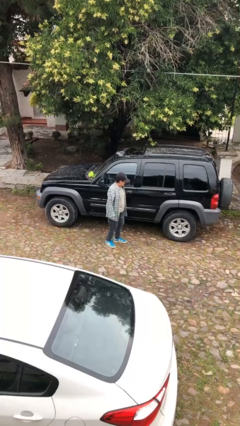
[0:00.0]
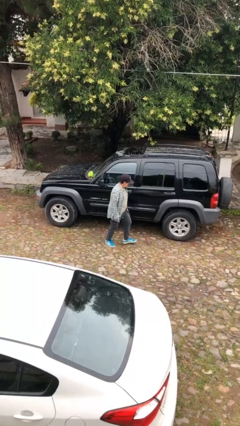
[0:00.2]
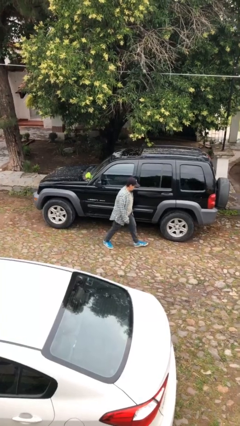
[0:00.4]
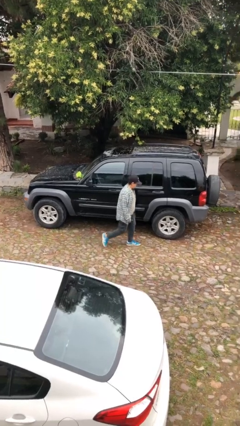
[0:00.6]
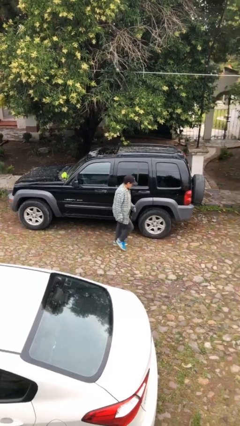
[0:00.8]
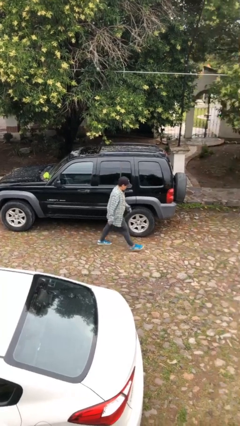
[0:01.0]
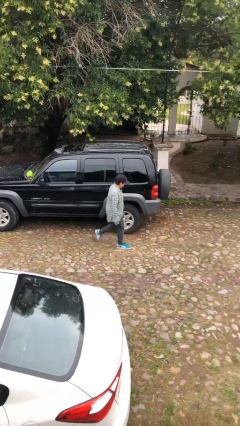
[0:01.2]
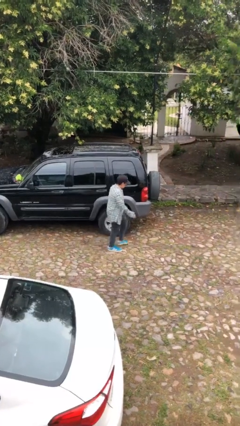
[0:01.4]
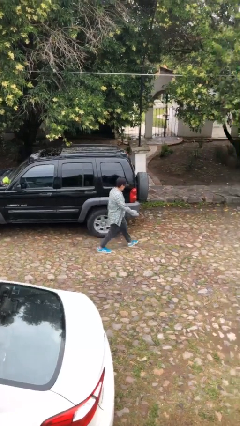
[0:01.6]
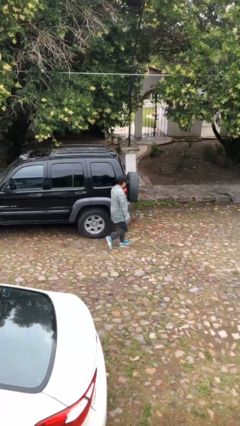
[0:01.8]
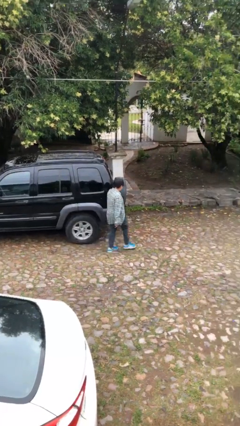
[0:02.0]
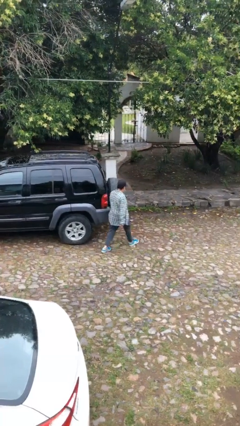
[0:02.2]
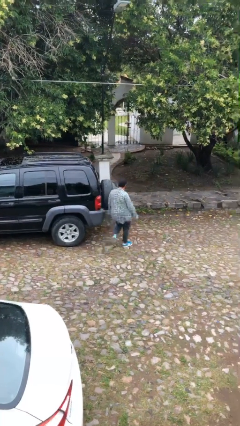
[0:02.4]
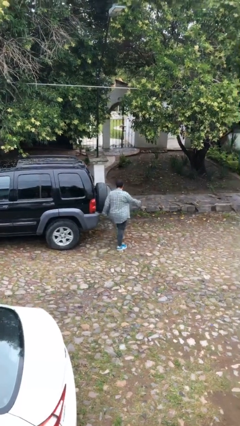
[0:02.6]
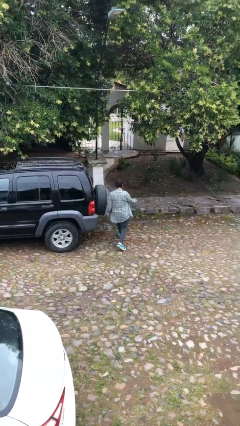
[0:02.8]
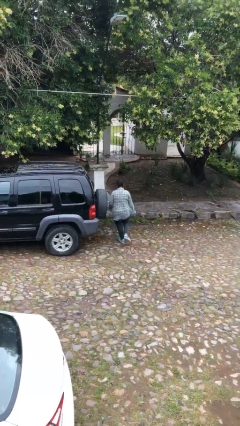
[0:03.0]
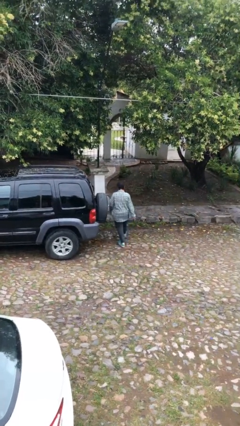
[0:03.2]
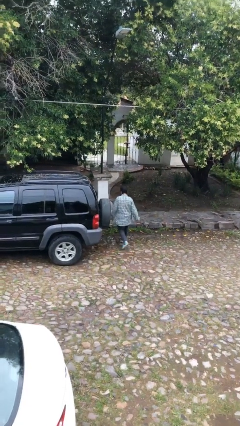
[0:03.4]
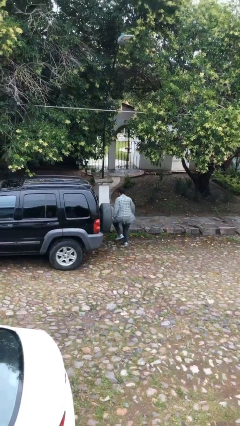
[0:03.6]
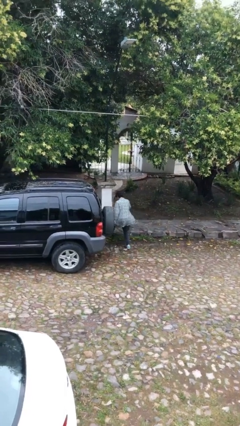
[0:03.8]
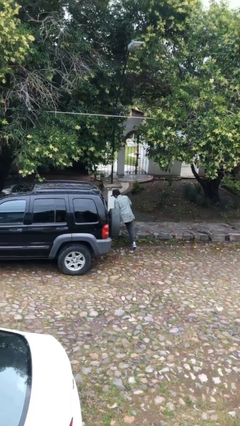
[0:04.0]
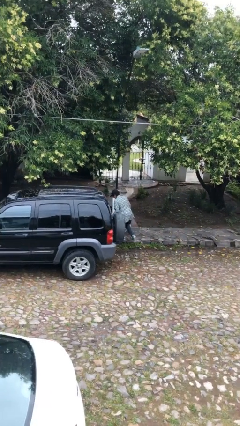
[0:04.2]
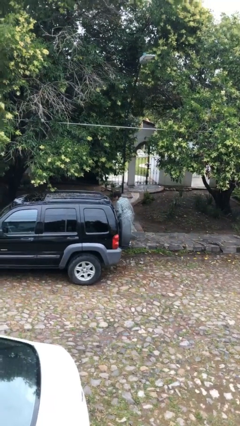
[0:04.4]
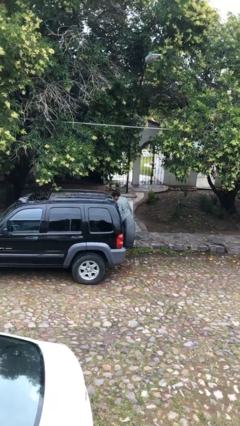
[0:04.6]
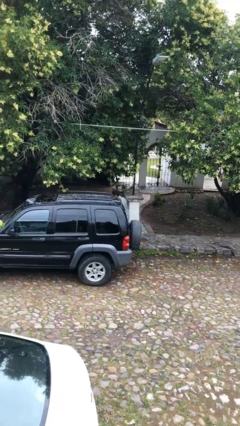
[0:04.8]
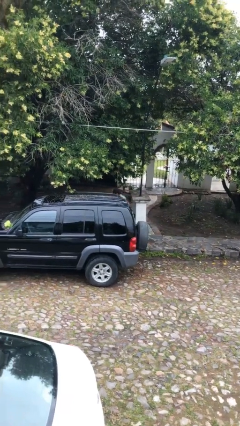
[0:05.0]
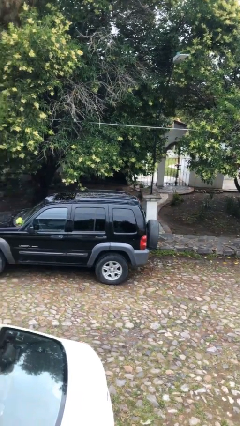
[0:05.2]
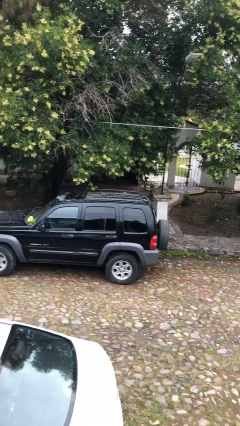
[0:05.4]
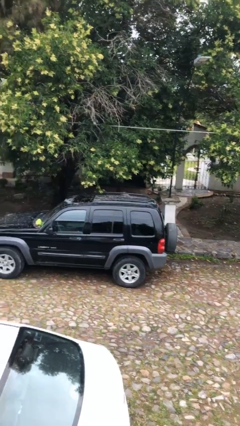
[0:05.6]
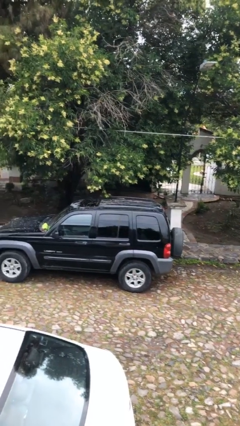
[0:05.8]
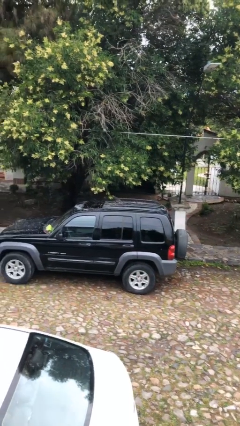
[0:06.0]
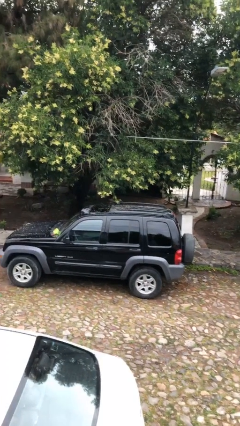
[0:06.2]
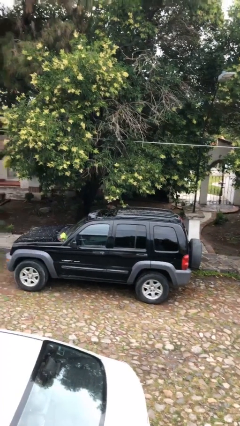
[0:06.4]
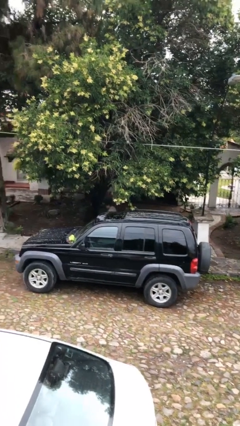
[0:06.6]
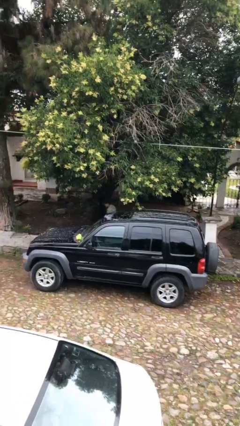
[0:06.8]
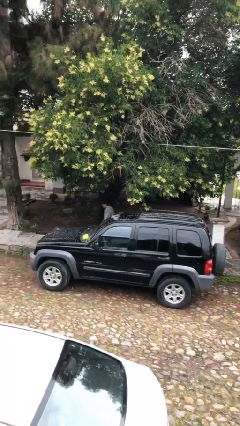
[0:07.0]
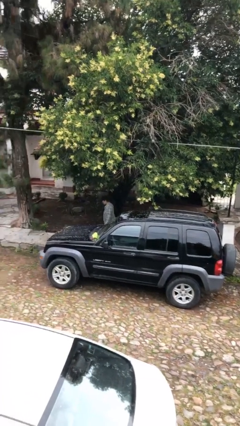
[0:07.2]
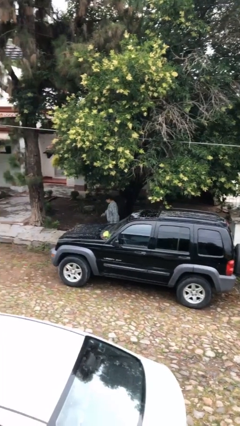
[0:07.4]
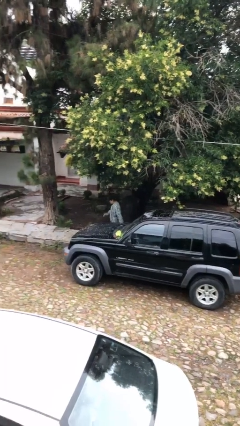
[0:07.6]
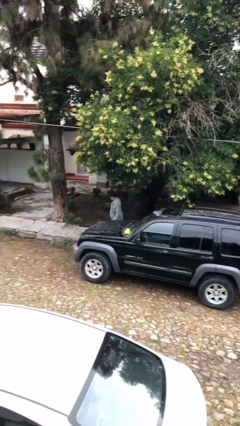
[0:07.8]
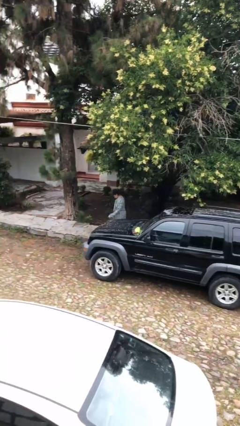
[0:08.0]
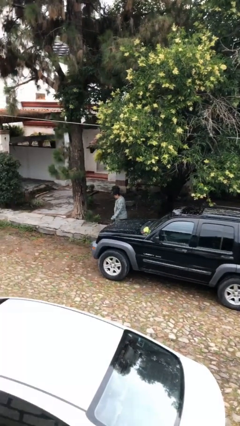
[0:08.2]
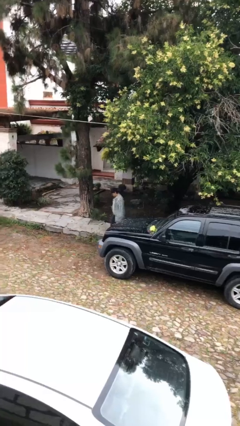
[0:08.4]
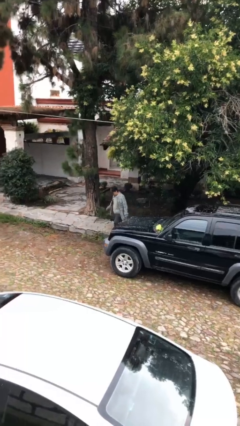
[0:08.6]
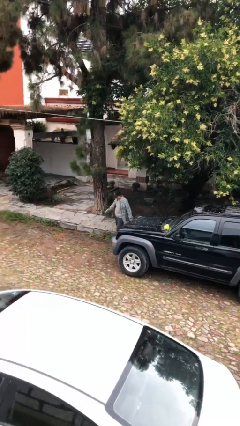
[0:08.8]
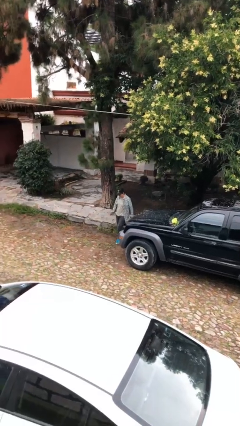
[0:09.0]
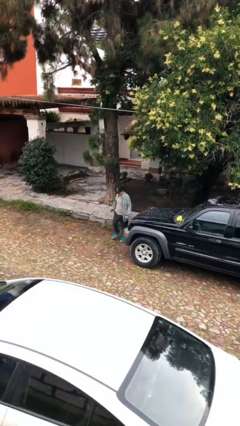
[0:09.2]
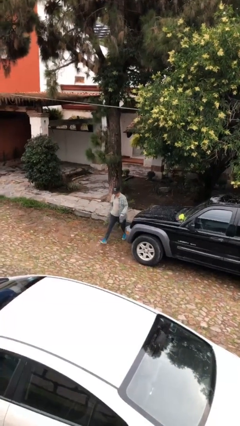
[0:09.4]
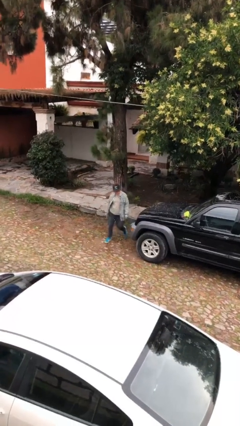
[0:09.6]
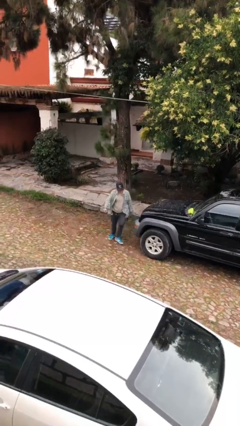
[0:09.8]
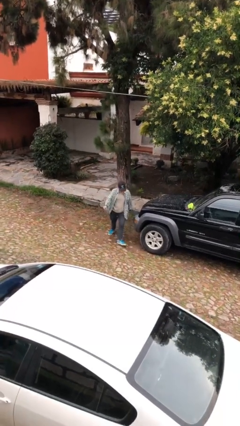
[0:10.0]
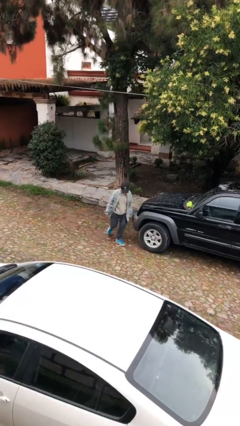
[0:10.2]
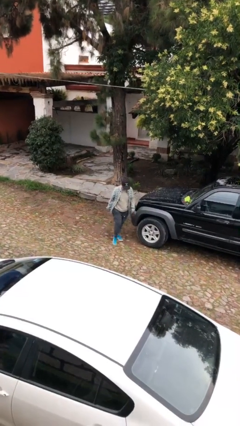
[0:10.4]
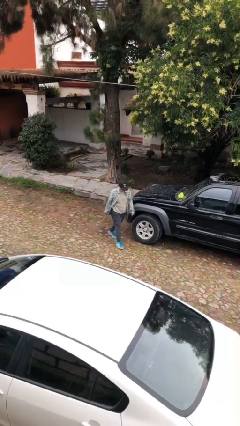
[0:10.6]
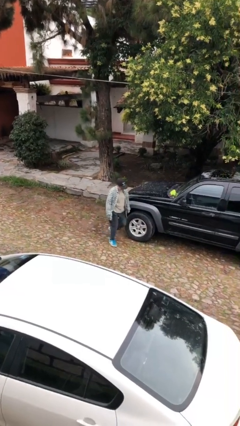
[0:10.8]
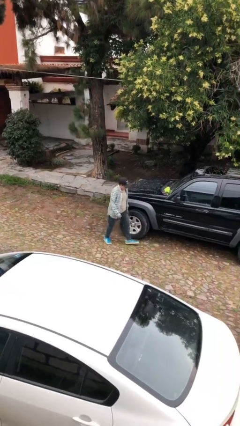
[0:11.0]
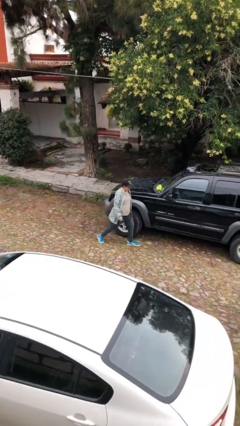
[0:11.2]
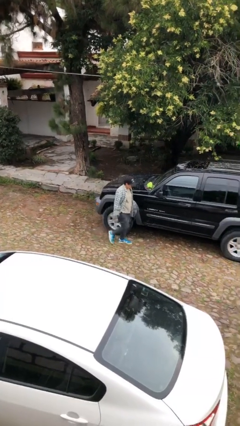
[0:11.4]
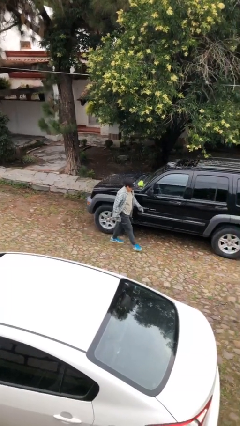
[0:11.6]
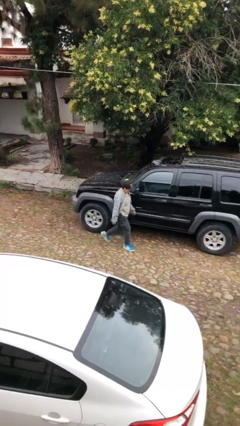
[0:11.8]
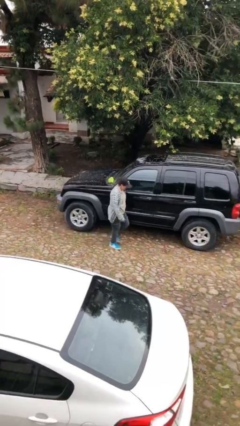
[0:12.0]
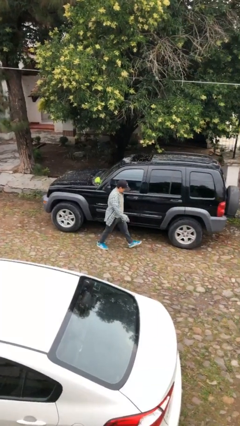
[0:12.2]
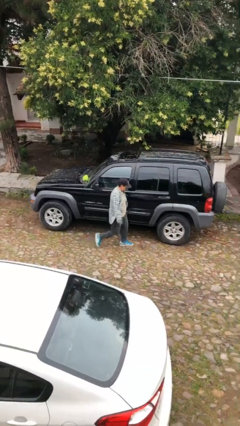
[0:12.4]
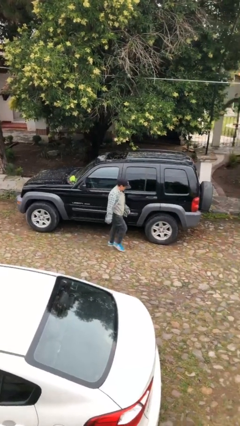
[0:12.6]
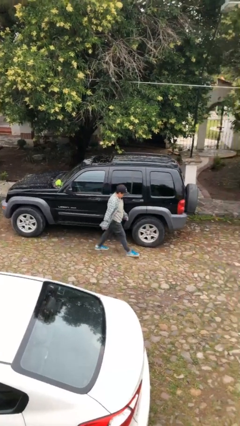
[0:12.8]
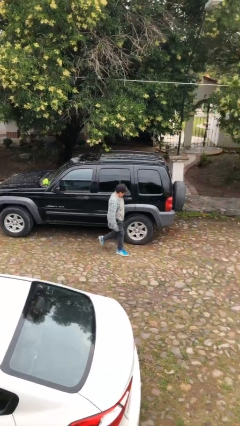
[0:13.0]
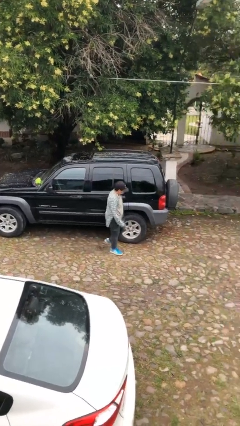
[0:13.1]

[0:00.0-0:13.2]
person walks around car

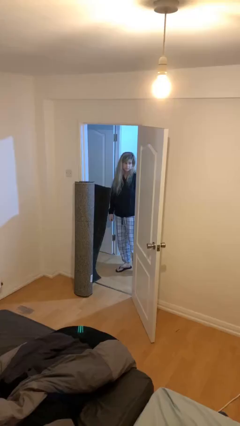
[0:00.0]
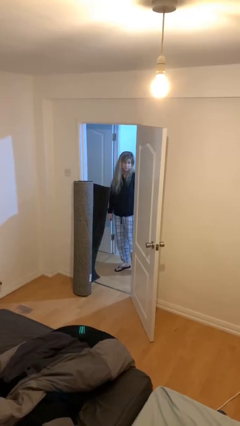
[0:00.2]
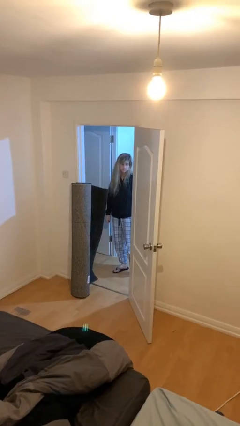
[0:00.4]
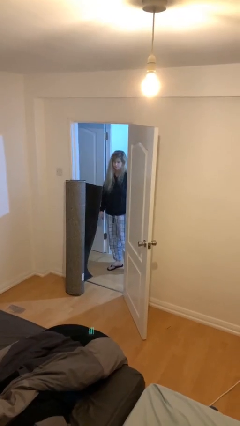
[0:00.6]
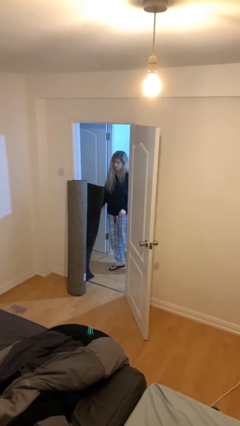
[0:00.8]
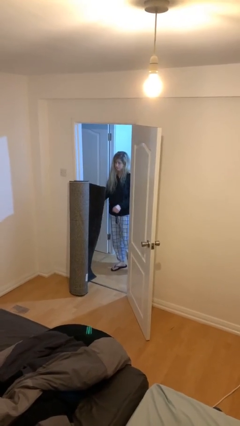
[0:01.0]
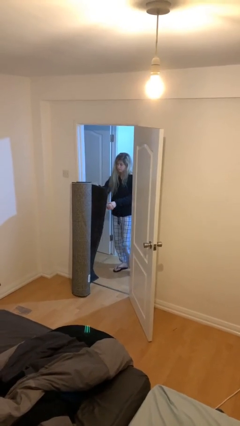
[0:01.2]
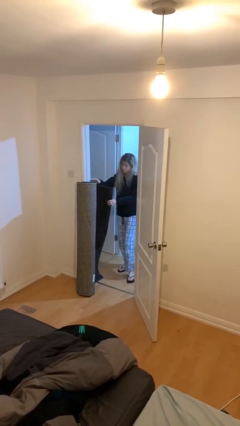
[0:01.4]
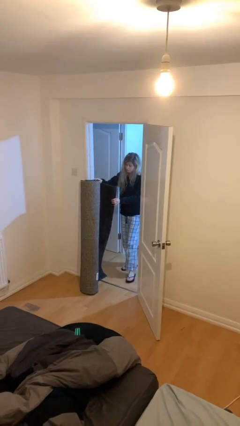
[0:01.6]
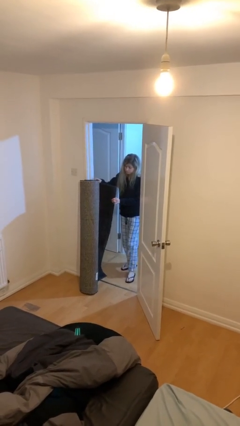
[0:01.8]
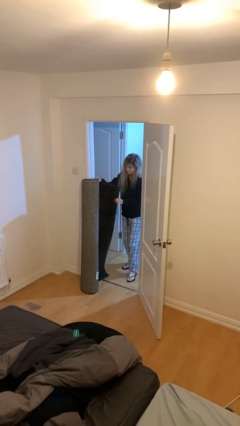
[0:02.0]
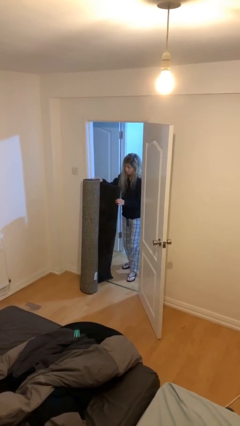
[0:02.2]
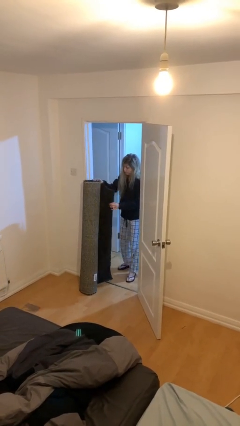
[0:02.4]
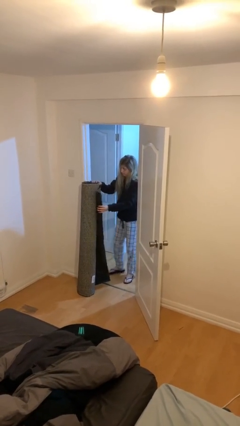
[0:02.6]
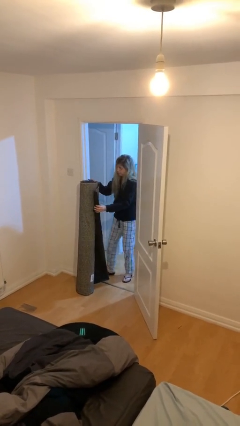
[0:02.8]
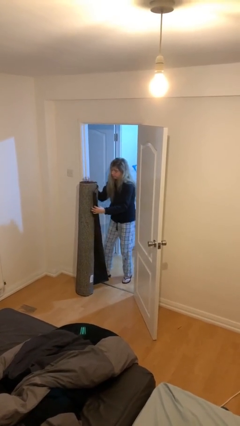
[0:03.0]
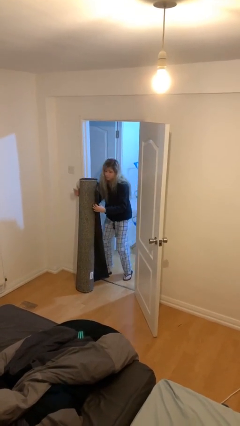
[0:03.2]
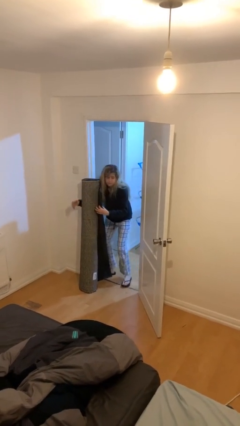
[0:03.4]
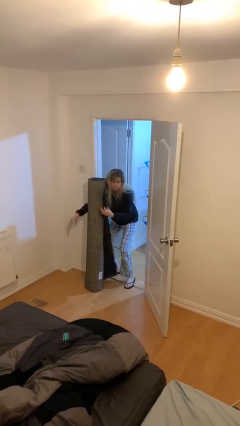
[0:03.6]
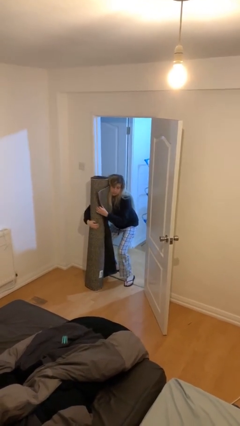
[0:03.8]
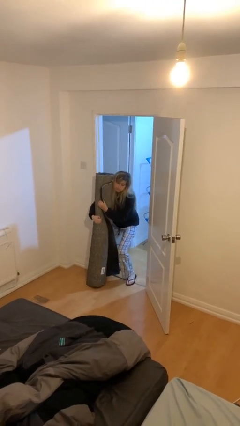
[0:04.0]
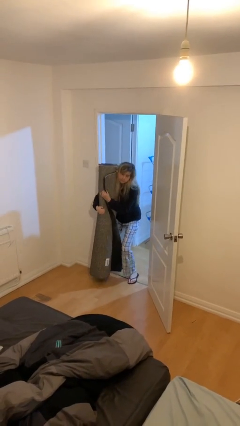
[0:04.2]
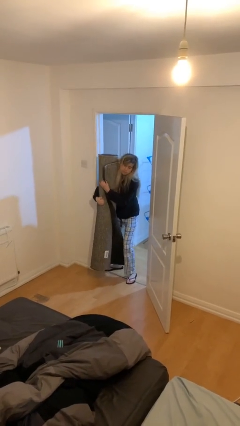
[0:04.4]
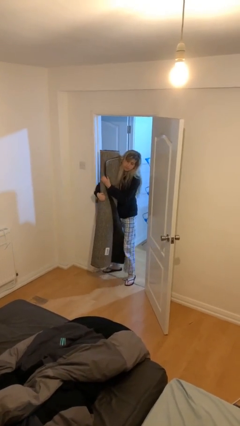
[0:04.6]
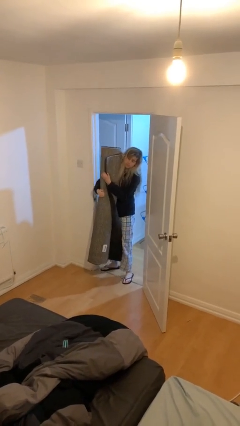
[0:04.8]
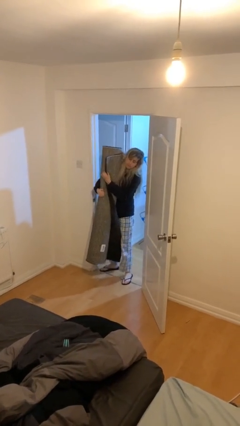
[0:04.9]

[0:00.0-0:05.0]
person picks up object from floor
